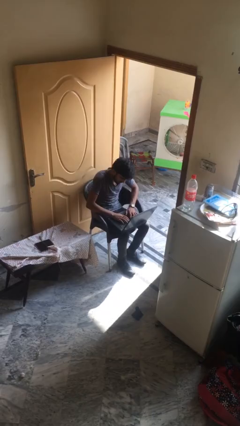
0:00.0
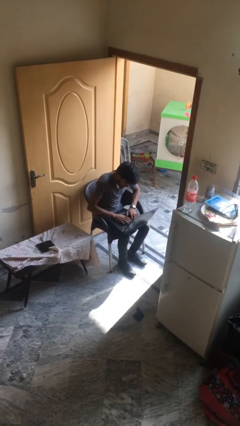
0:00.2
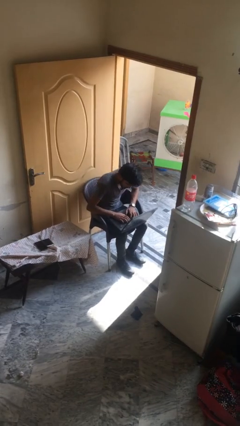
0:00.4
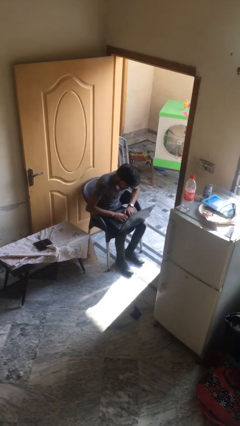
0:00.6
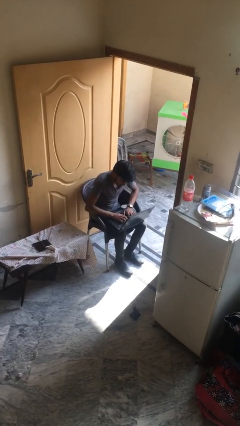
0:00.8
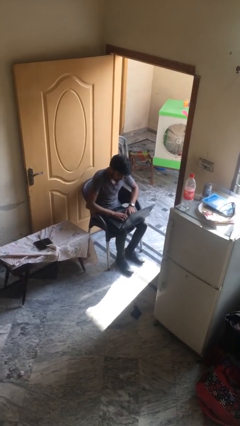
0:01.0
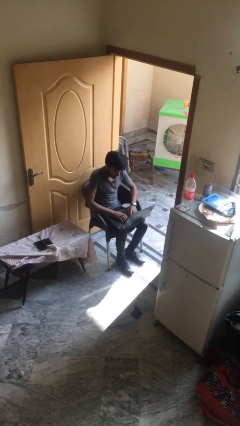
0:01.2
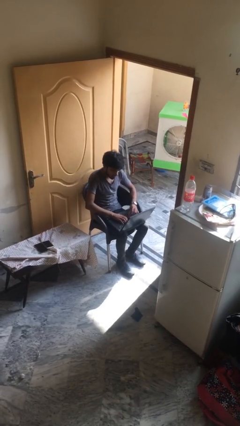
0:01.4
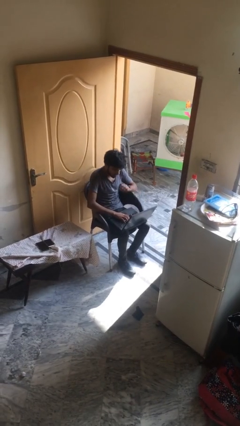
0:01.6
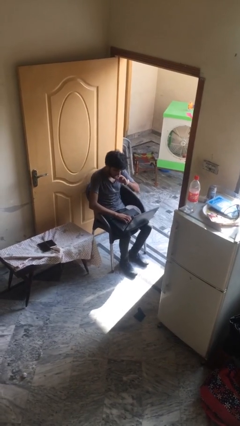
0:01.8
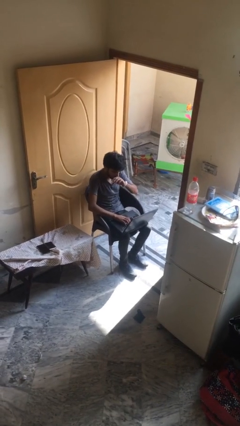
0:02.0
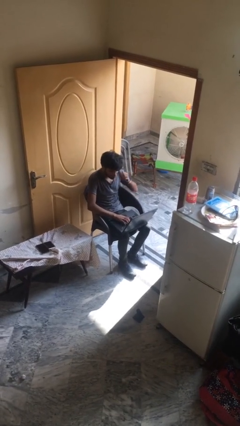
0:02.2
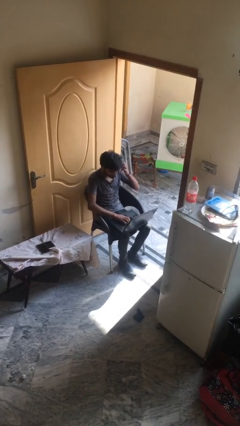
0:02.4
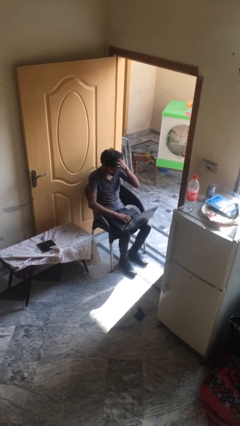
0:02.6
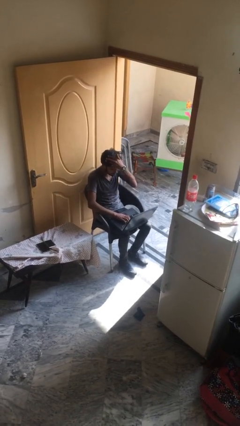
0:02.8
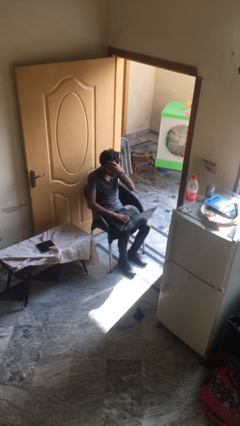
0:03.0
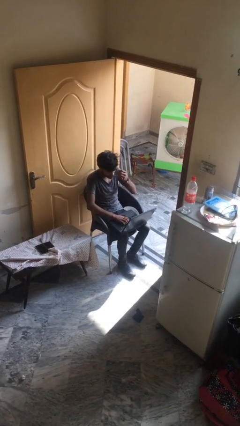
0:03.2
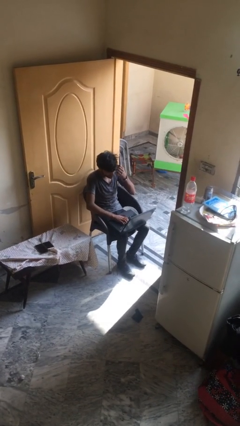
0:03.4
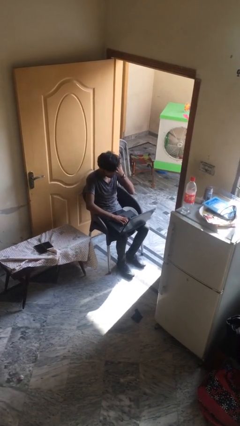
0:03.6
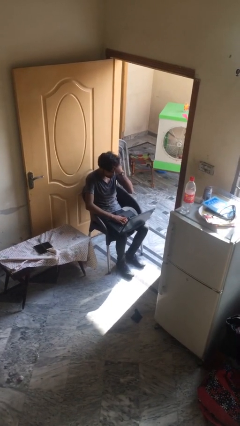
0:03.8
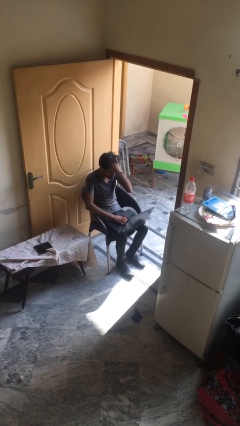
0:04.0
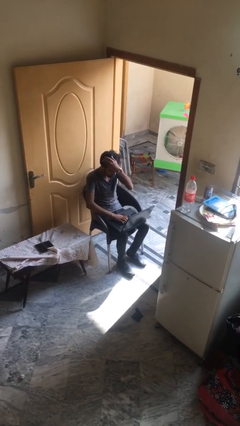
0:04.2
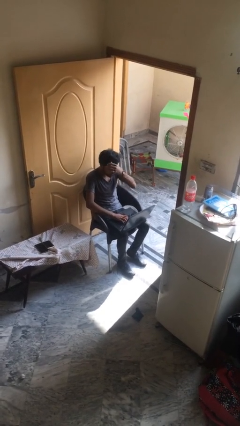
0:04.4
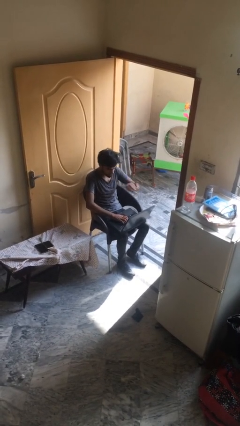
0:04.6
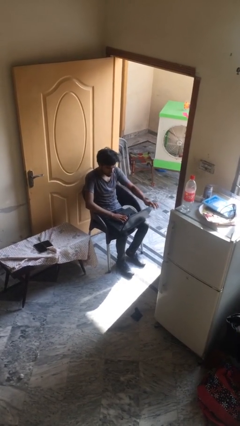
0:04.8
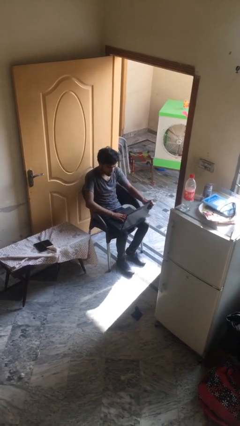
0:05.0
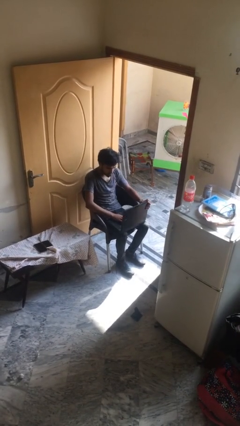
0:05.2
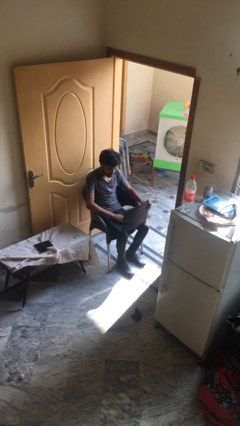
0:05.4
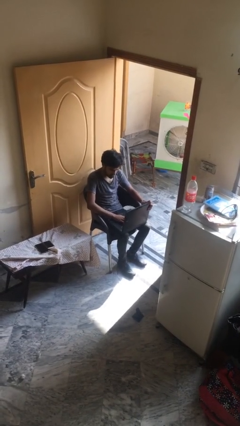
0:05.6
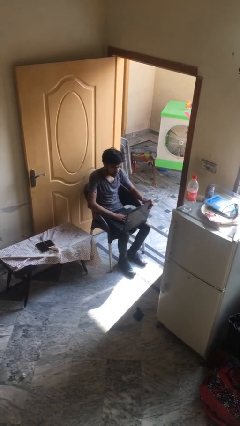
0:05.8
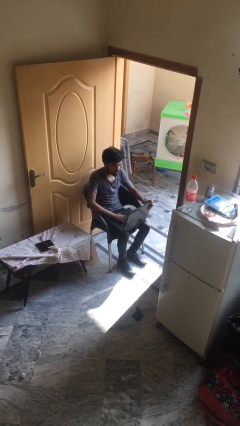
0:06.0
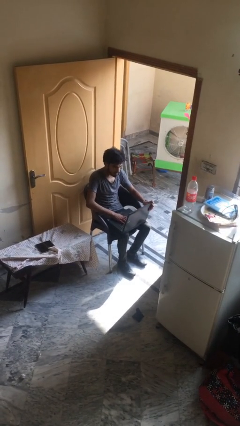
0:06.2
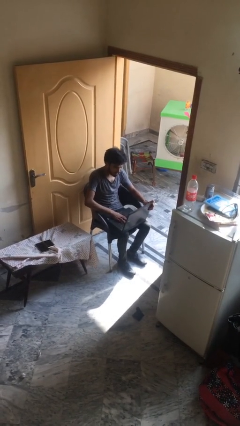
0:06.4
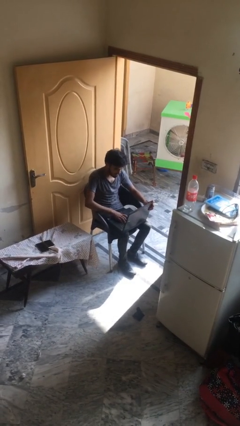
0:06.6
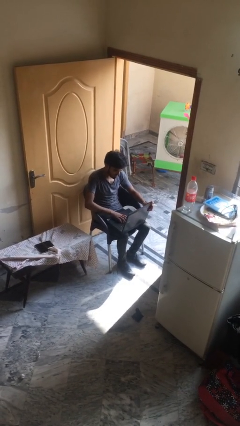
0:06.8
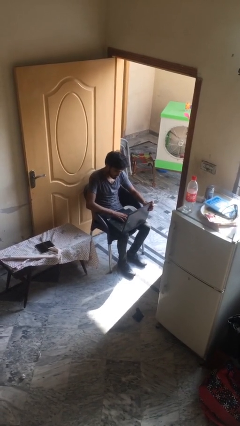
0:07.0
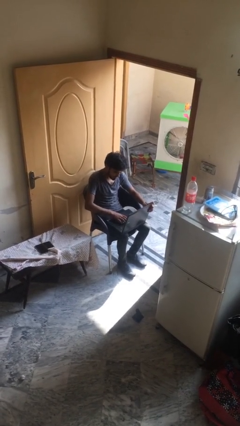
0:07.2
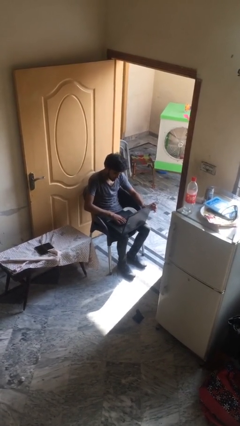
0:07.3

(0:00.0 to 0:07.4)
person interacts with laptop

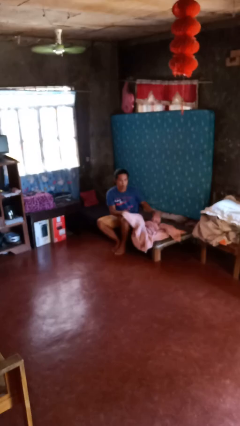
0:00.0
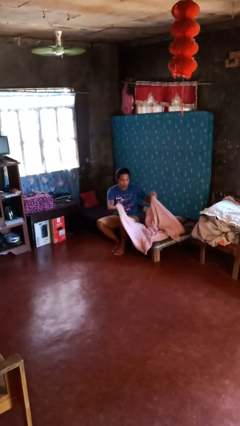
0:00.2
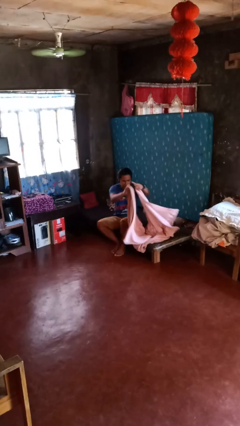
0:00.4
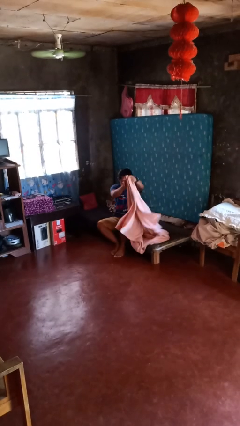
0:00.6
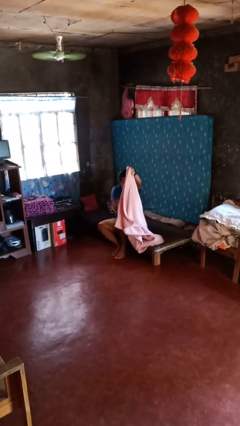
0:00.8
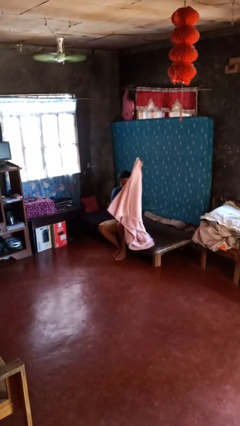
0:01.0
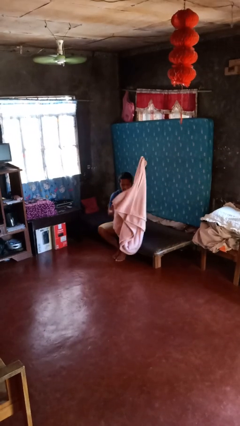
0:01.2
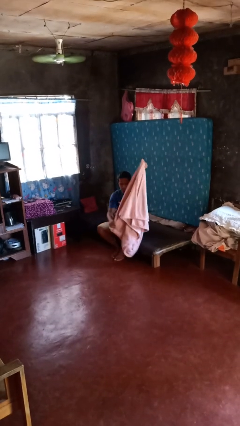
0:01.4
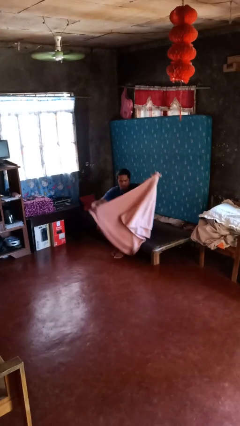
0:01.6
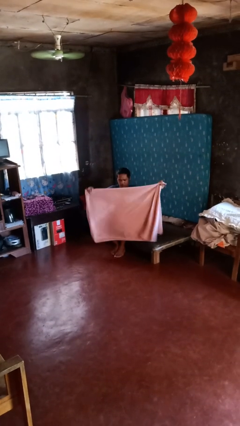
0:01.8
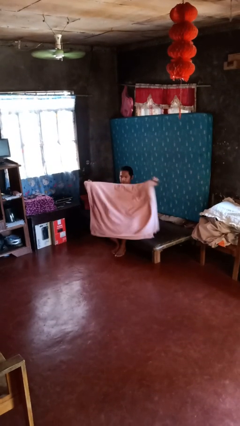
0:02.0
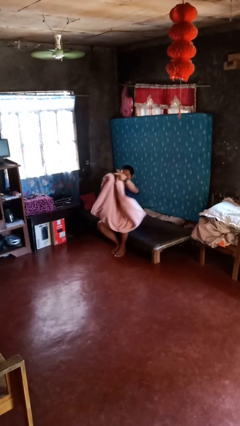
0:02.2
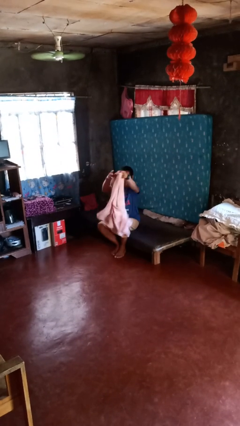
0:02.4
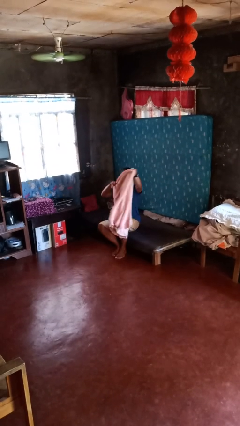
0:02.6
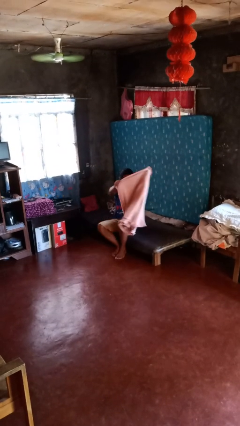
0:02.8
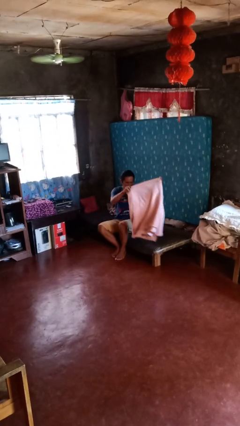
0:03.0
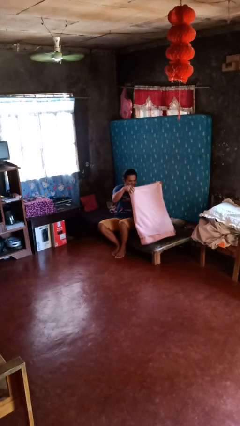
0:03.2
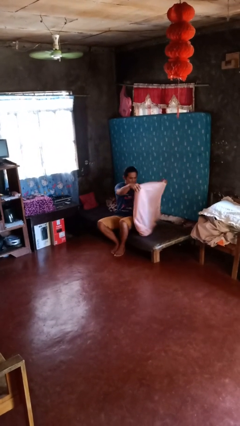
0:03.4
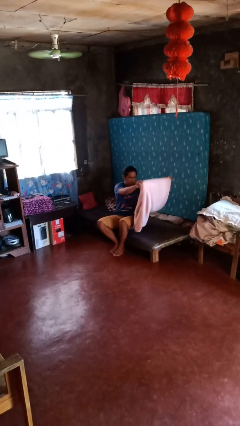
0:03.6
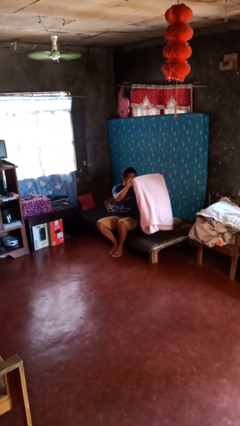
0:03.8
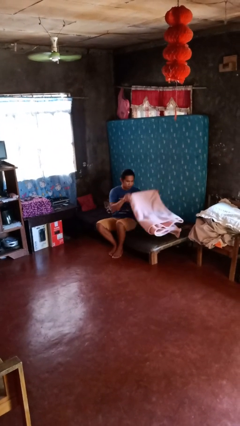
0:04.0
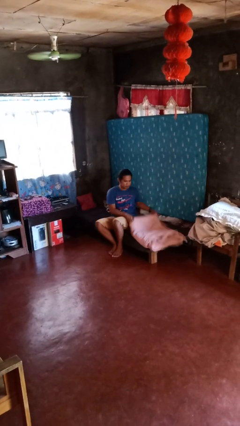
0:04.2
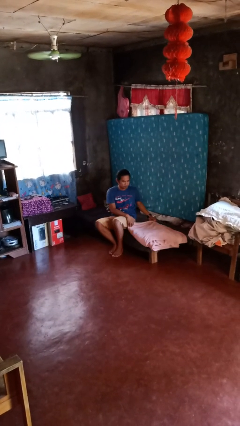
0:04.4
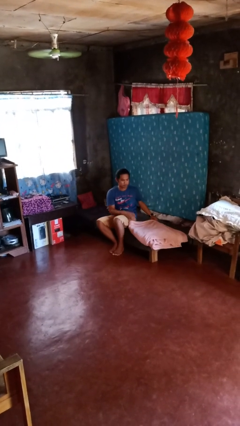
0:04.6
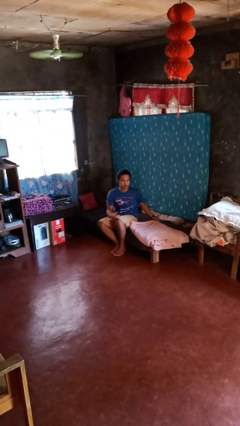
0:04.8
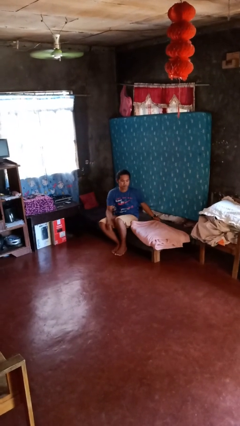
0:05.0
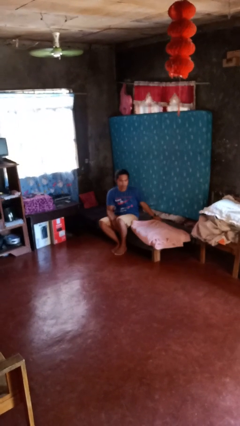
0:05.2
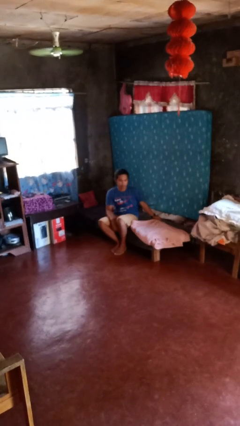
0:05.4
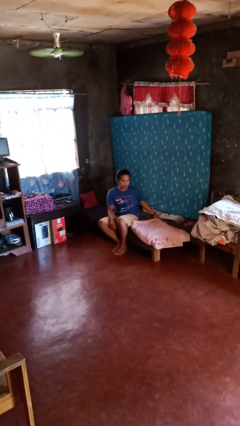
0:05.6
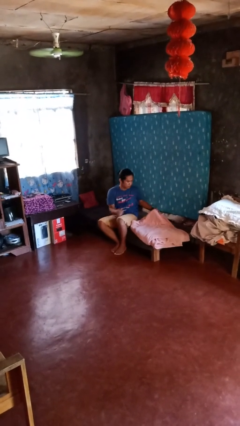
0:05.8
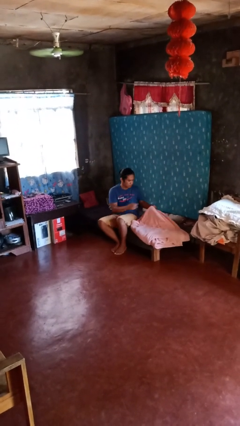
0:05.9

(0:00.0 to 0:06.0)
person folds blanket

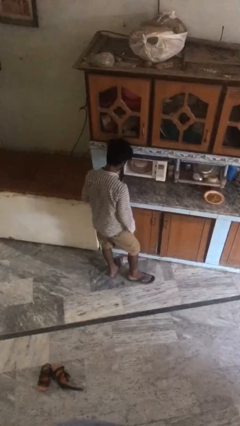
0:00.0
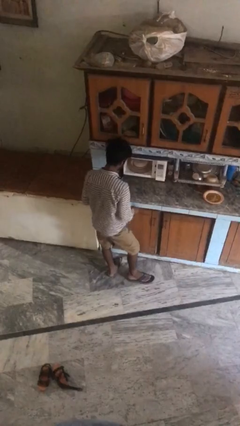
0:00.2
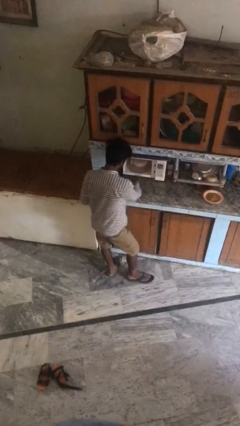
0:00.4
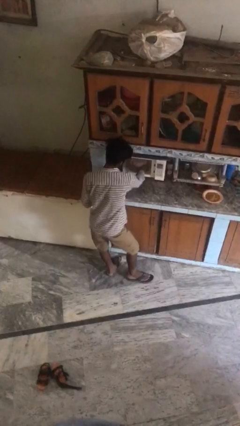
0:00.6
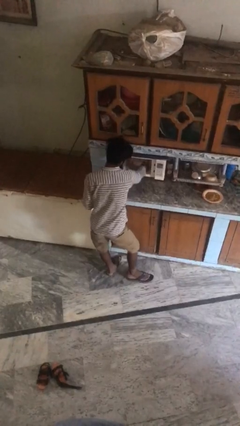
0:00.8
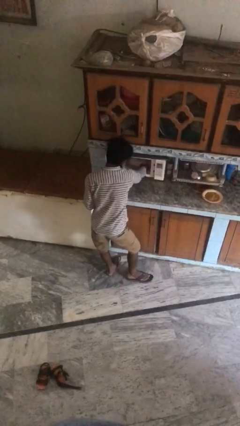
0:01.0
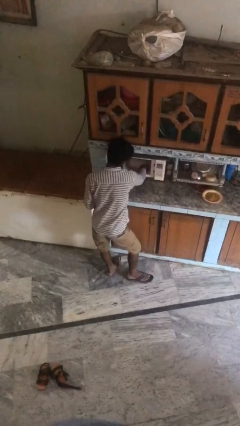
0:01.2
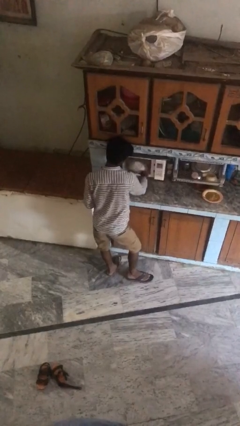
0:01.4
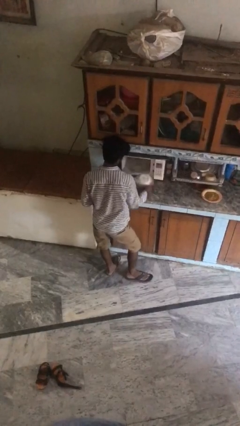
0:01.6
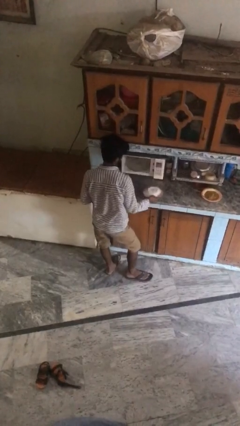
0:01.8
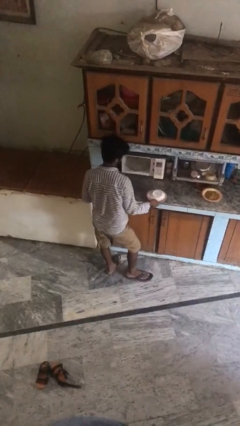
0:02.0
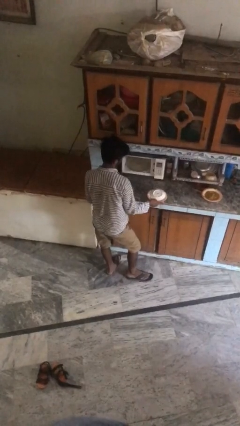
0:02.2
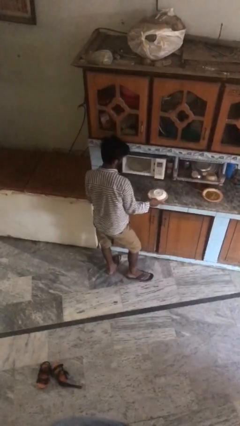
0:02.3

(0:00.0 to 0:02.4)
person takes object from oven

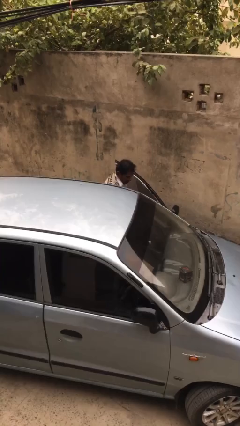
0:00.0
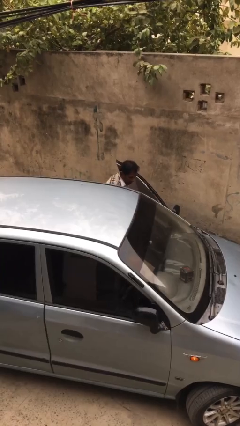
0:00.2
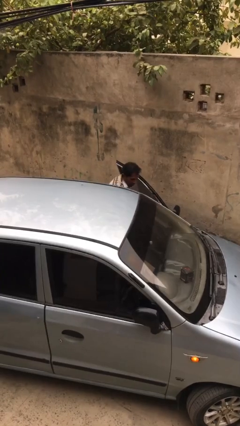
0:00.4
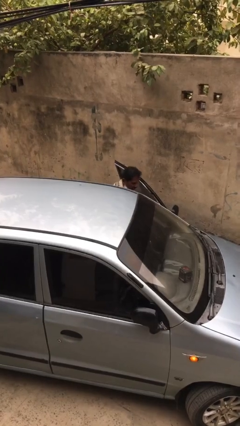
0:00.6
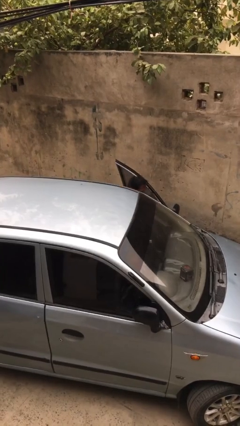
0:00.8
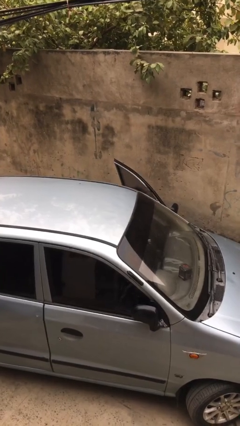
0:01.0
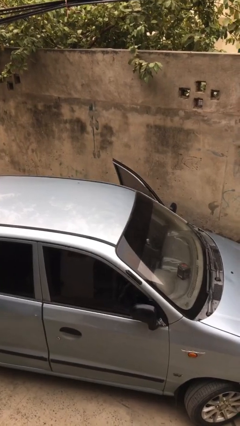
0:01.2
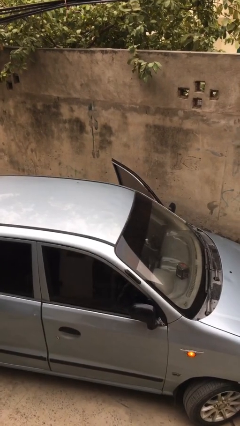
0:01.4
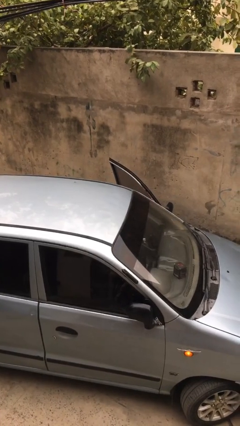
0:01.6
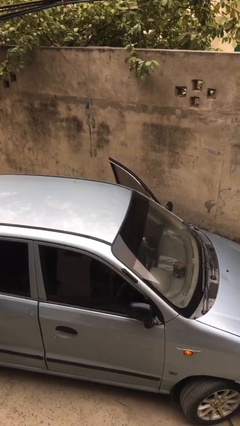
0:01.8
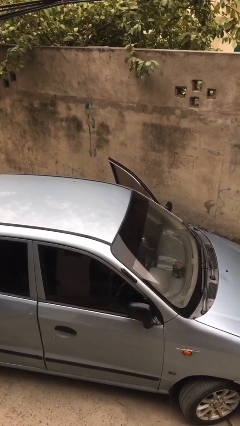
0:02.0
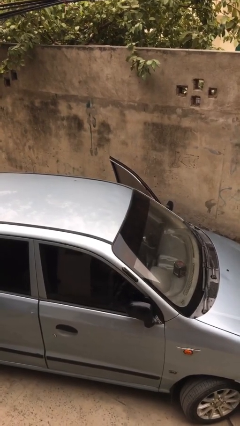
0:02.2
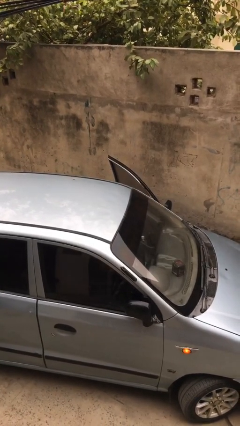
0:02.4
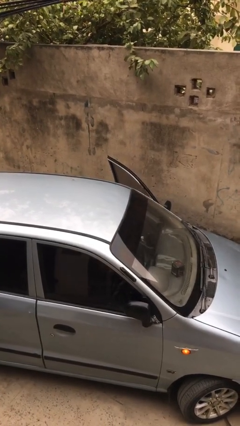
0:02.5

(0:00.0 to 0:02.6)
person enters car
